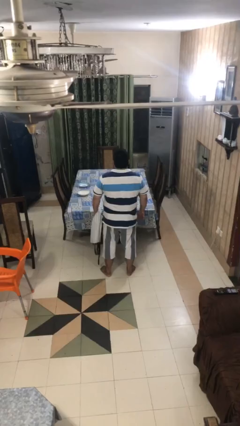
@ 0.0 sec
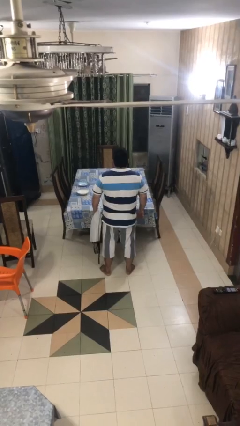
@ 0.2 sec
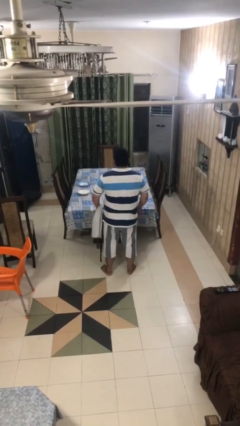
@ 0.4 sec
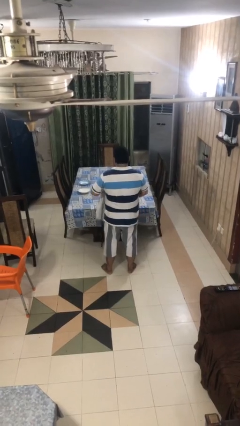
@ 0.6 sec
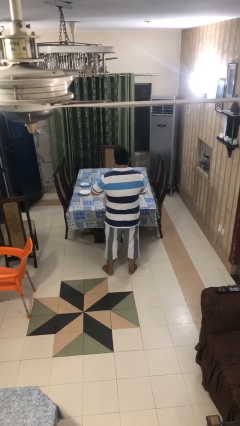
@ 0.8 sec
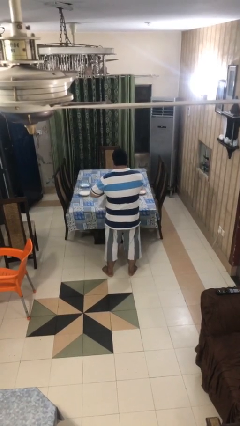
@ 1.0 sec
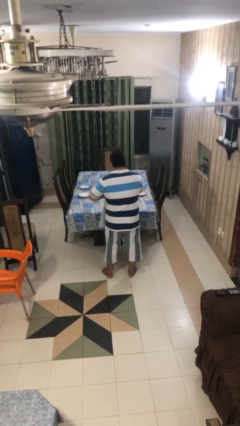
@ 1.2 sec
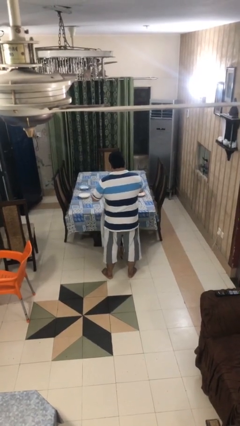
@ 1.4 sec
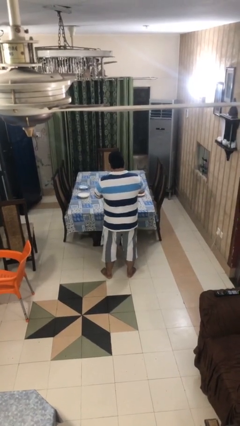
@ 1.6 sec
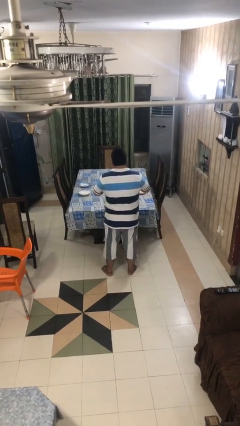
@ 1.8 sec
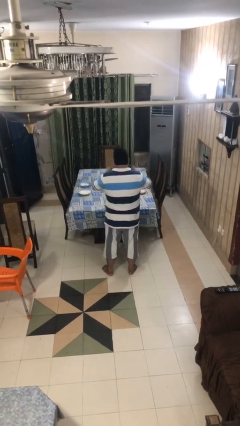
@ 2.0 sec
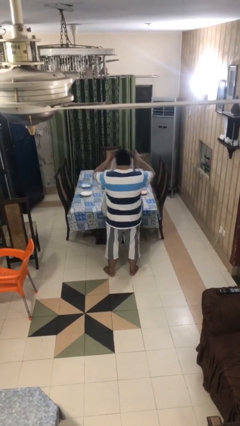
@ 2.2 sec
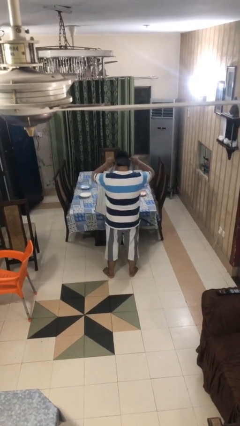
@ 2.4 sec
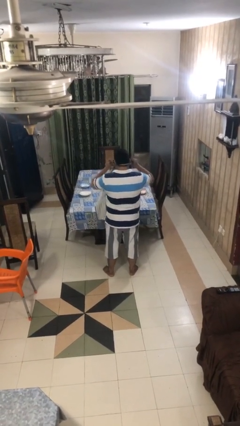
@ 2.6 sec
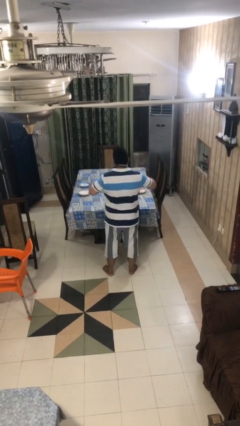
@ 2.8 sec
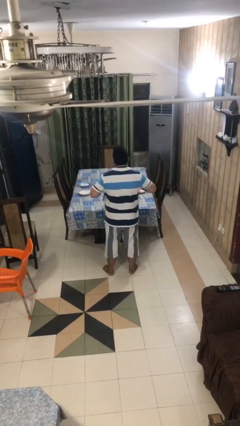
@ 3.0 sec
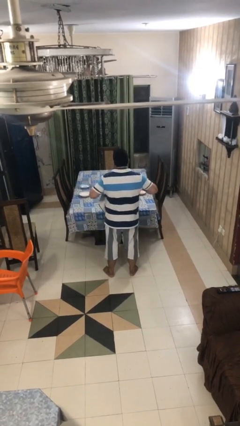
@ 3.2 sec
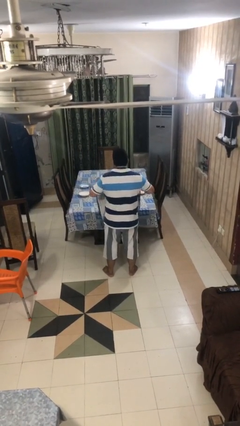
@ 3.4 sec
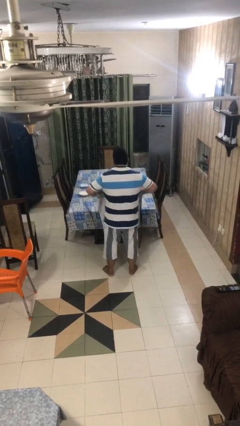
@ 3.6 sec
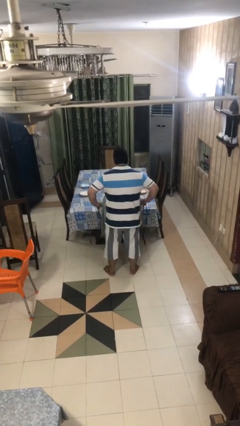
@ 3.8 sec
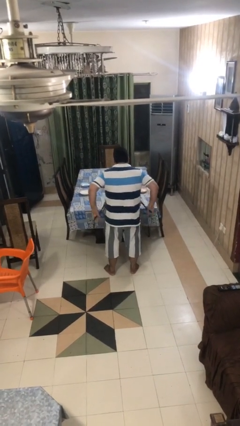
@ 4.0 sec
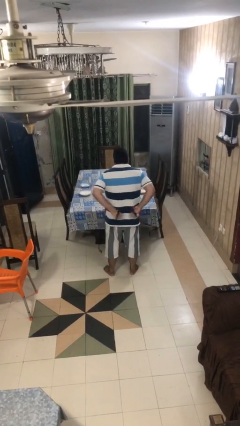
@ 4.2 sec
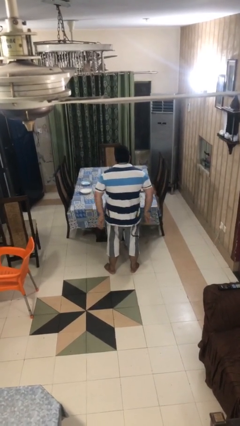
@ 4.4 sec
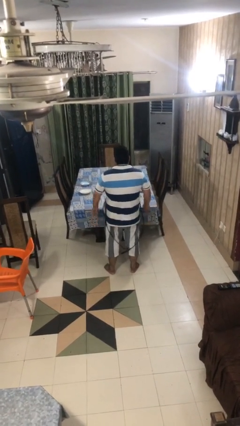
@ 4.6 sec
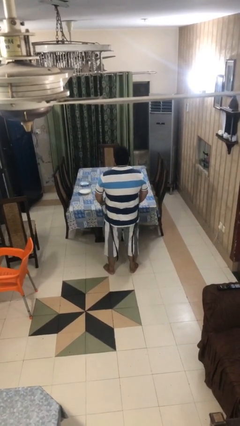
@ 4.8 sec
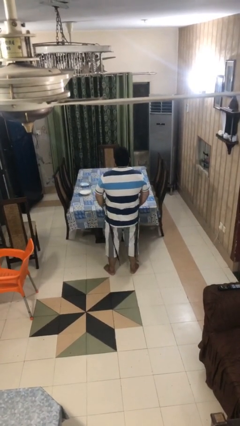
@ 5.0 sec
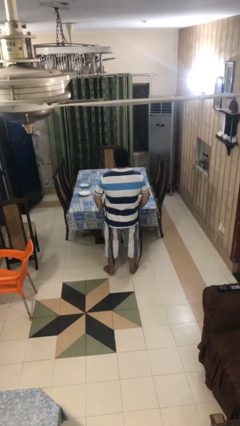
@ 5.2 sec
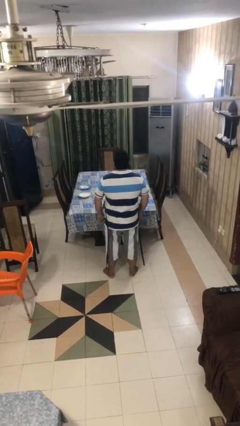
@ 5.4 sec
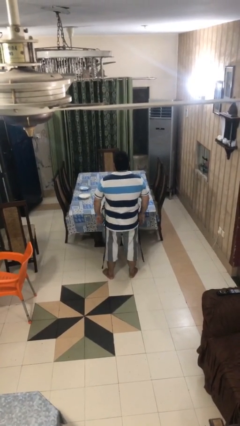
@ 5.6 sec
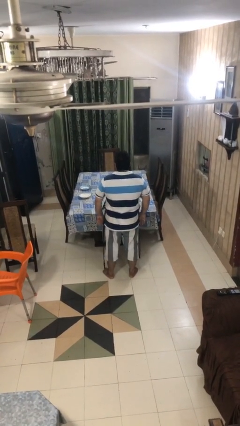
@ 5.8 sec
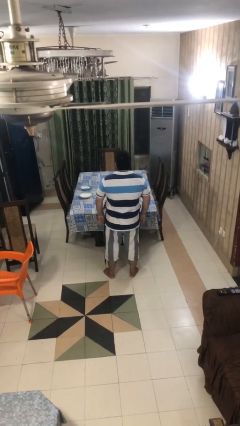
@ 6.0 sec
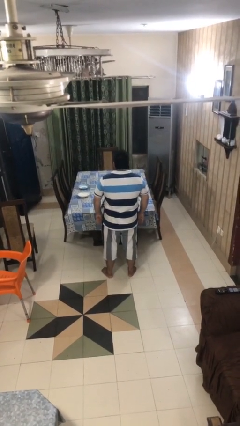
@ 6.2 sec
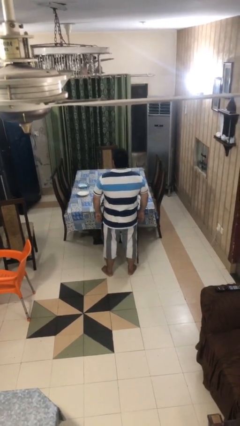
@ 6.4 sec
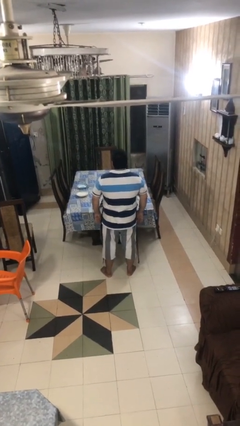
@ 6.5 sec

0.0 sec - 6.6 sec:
person puts on apron

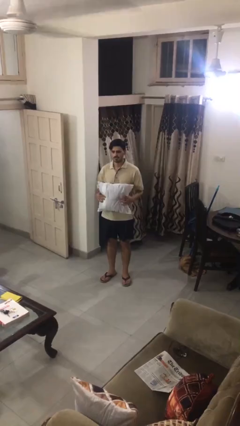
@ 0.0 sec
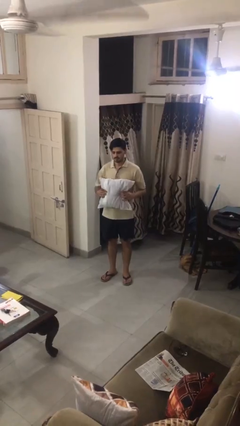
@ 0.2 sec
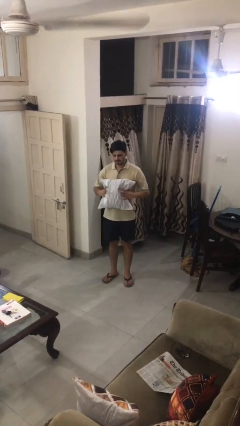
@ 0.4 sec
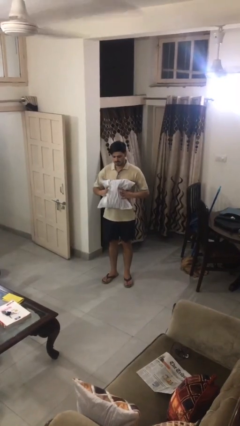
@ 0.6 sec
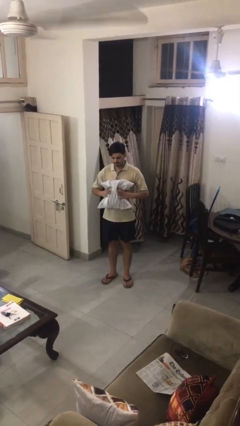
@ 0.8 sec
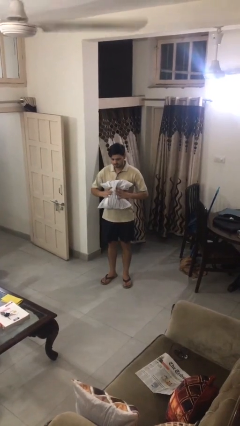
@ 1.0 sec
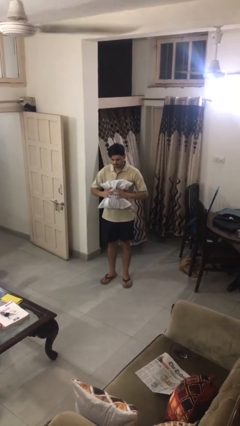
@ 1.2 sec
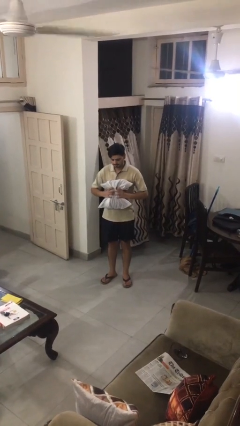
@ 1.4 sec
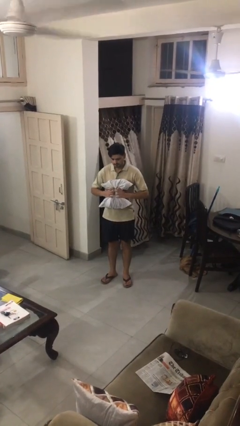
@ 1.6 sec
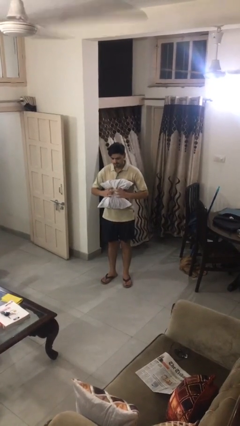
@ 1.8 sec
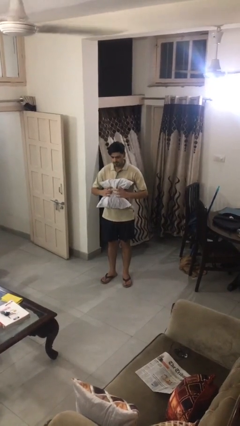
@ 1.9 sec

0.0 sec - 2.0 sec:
person squeezes object

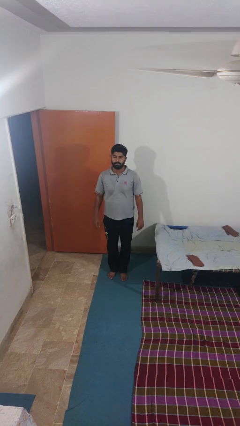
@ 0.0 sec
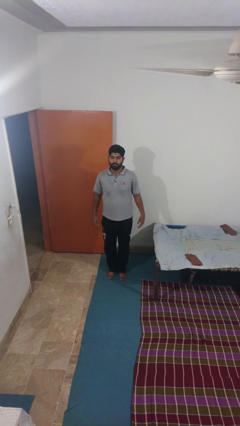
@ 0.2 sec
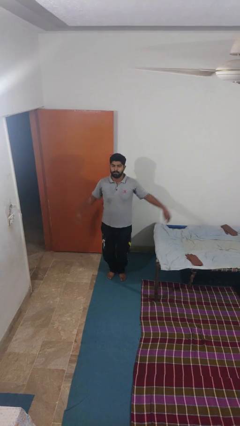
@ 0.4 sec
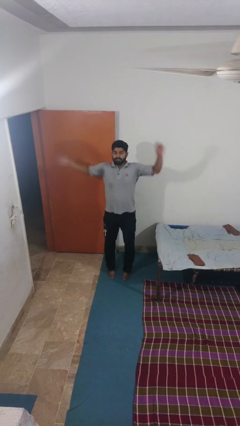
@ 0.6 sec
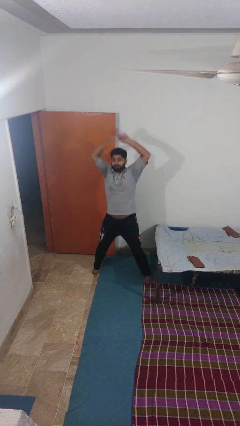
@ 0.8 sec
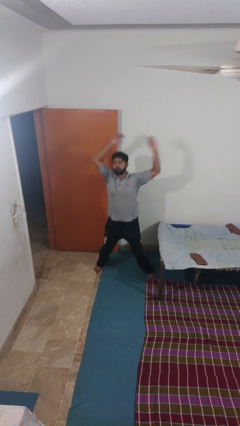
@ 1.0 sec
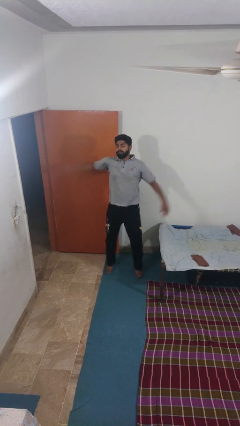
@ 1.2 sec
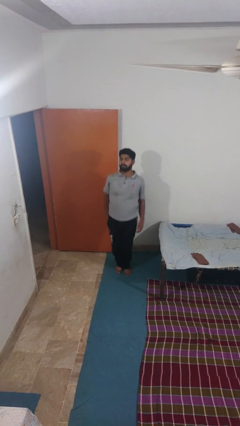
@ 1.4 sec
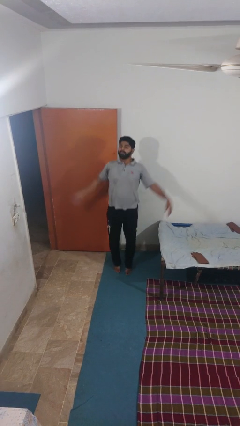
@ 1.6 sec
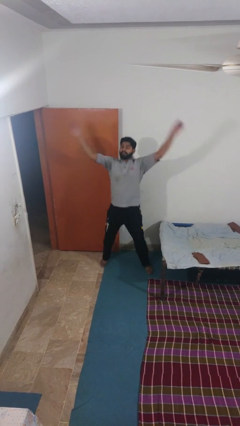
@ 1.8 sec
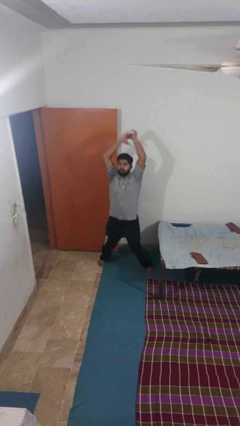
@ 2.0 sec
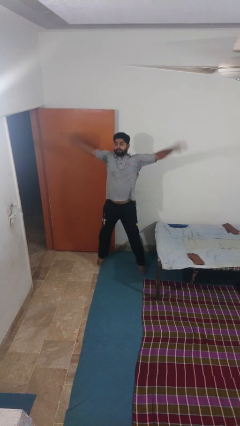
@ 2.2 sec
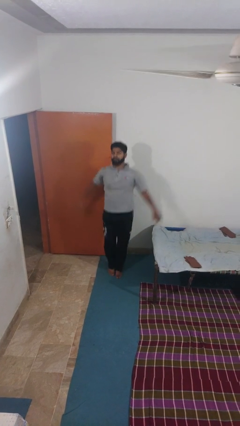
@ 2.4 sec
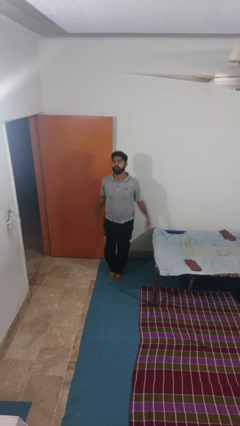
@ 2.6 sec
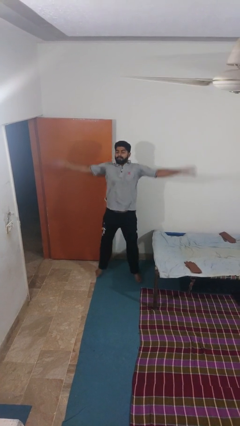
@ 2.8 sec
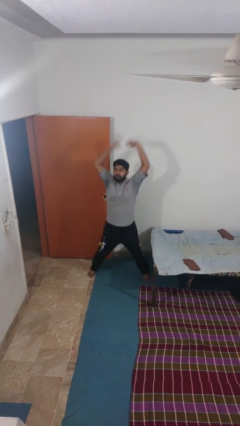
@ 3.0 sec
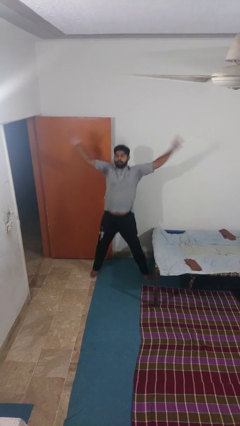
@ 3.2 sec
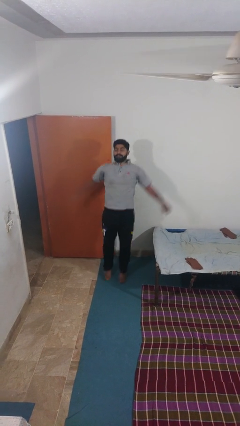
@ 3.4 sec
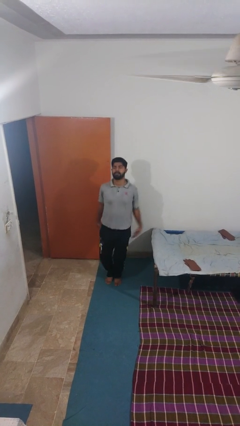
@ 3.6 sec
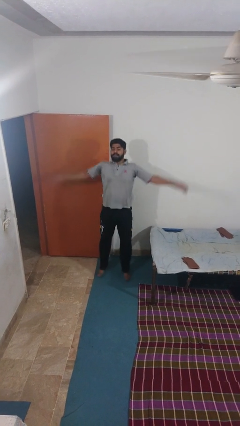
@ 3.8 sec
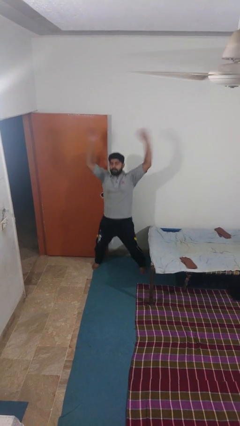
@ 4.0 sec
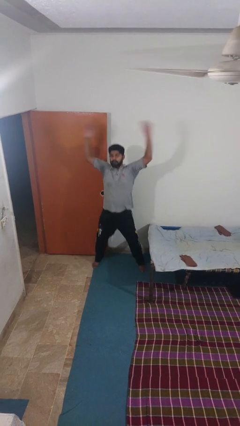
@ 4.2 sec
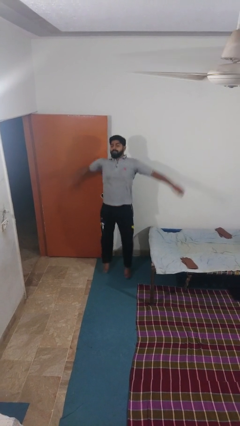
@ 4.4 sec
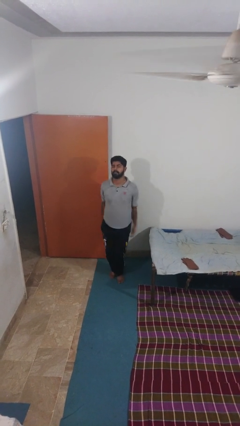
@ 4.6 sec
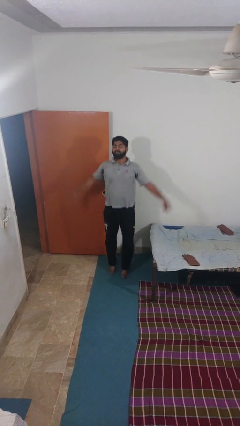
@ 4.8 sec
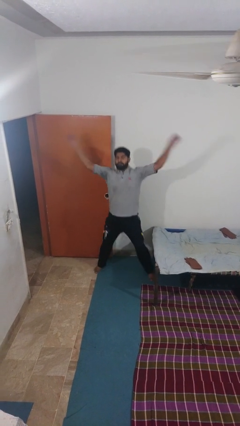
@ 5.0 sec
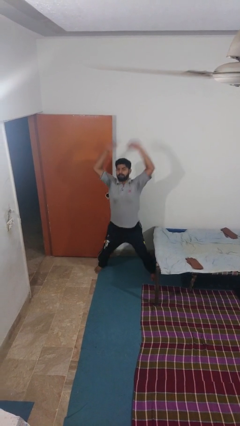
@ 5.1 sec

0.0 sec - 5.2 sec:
person exercises with jumping jacks

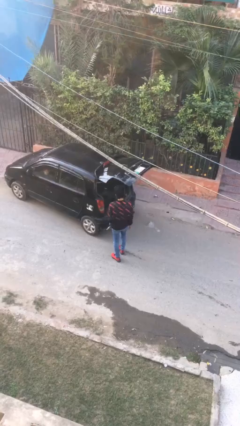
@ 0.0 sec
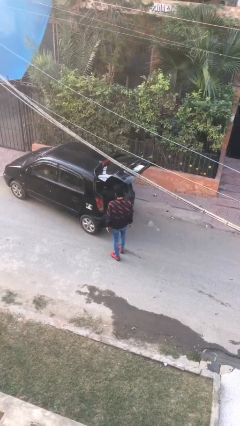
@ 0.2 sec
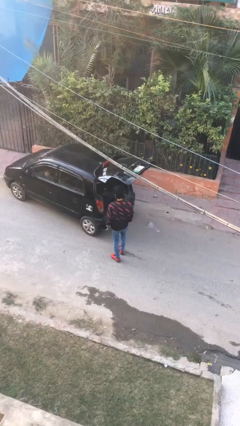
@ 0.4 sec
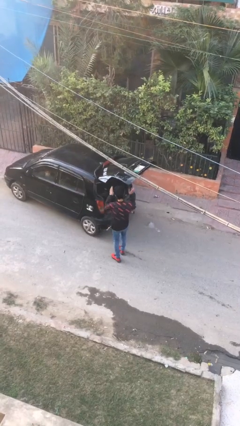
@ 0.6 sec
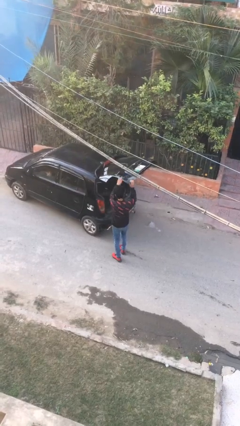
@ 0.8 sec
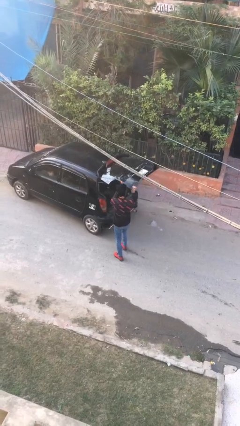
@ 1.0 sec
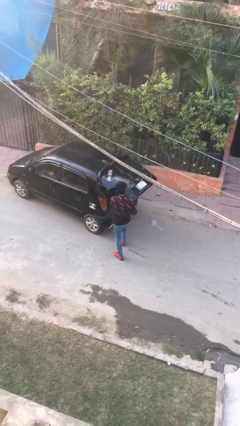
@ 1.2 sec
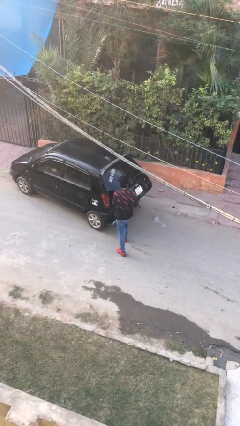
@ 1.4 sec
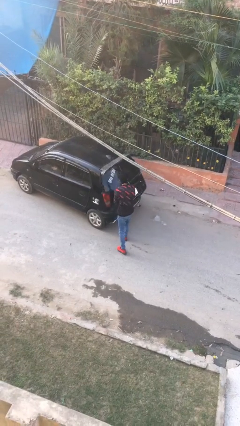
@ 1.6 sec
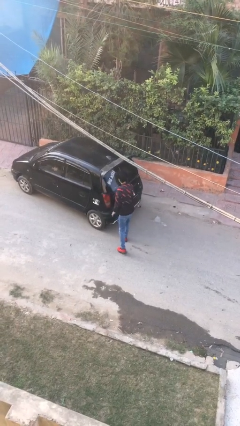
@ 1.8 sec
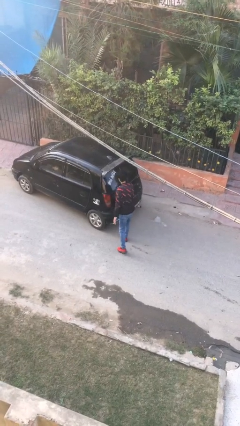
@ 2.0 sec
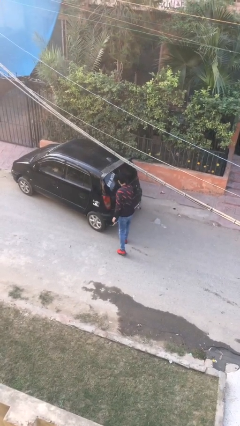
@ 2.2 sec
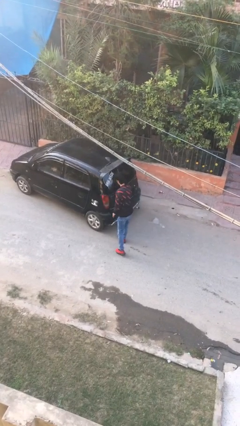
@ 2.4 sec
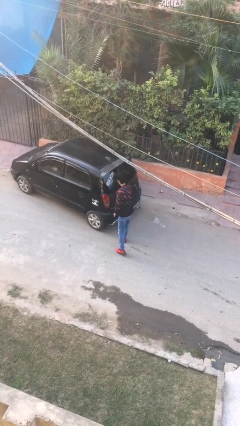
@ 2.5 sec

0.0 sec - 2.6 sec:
person closes car trunk

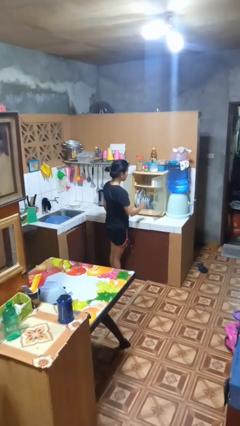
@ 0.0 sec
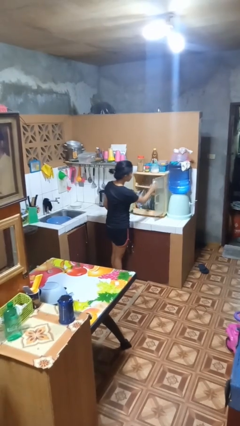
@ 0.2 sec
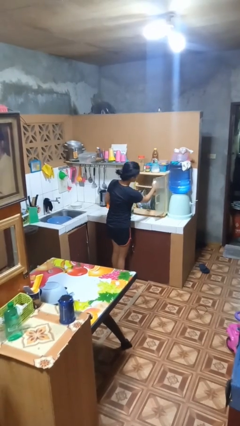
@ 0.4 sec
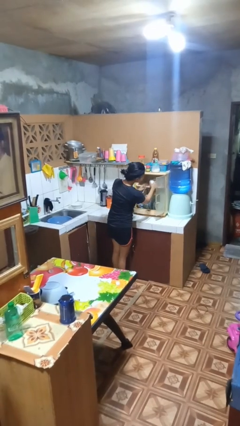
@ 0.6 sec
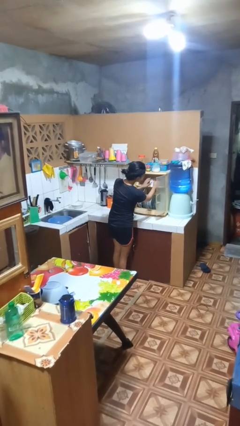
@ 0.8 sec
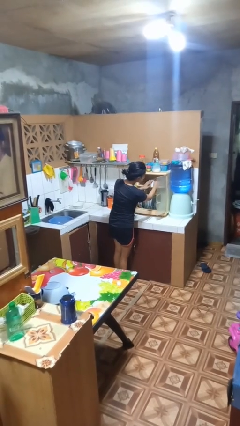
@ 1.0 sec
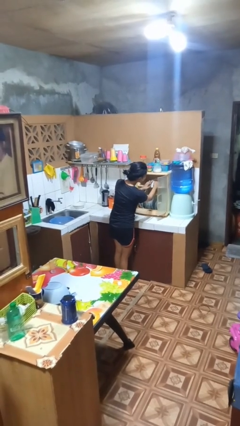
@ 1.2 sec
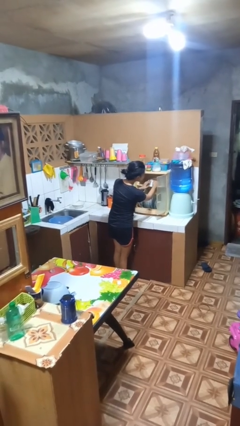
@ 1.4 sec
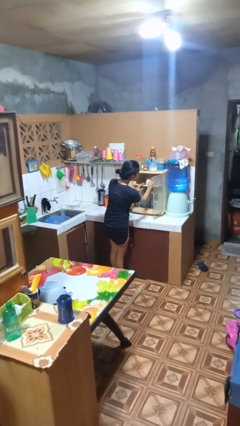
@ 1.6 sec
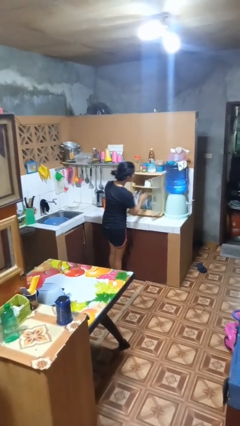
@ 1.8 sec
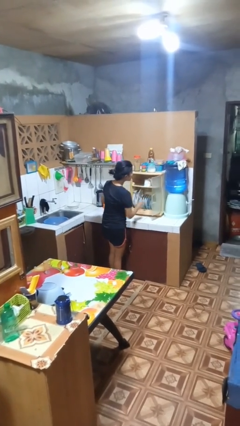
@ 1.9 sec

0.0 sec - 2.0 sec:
person searches in kitchen drawer
